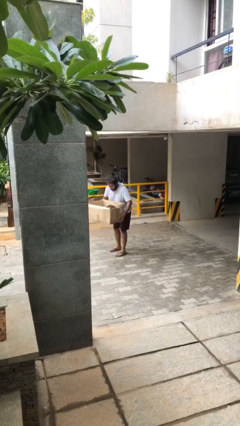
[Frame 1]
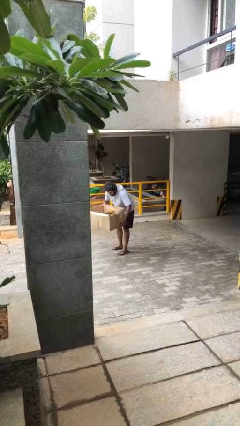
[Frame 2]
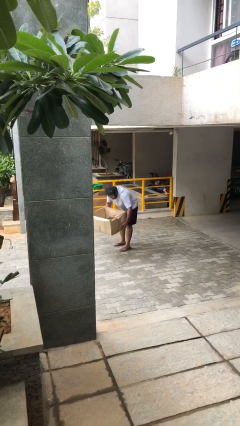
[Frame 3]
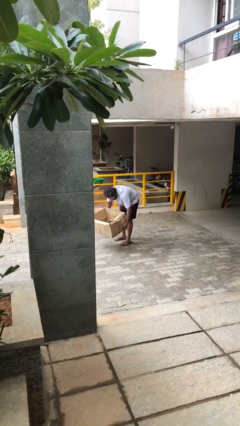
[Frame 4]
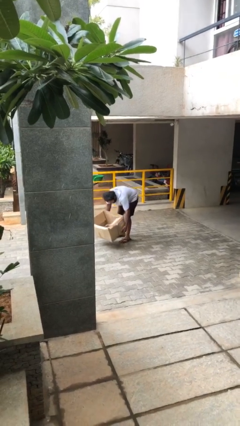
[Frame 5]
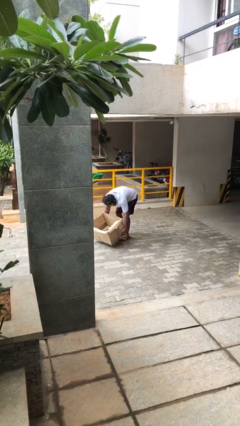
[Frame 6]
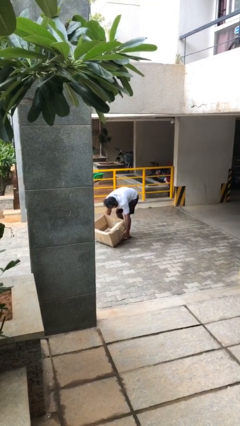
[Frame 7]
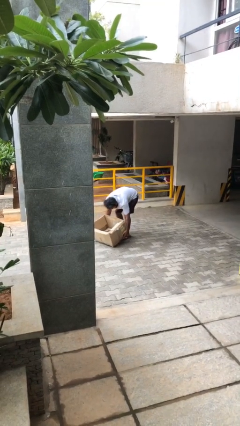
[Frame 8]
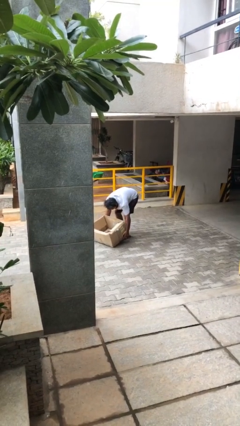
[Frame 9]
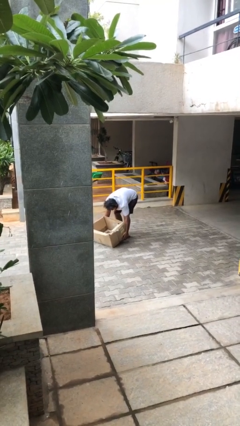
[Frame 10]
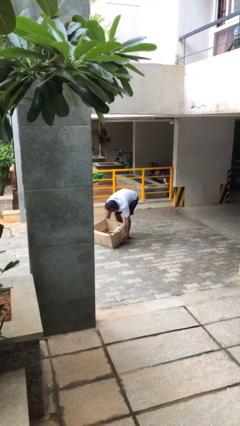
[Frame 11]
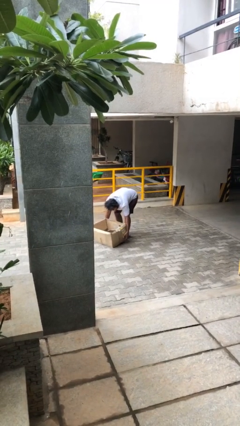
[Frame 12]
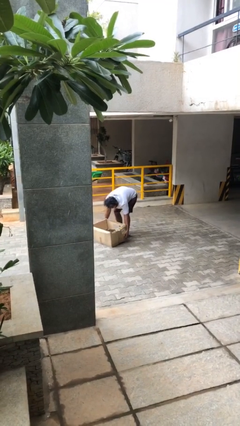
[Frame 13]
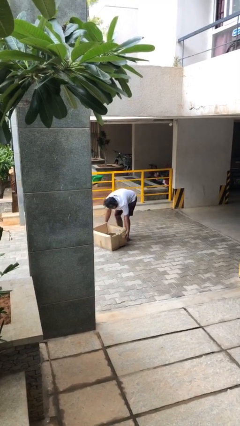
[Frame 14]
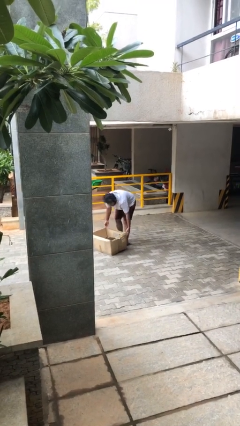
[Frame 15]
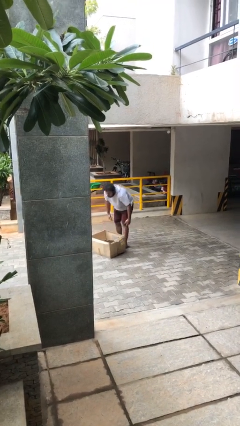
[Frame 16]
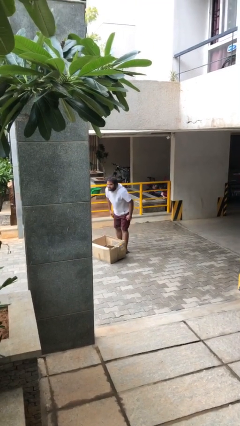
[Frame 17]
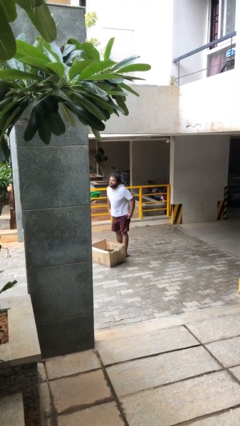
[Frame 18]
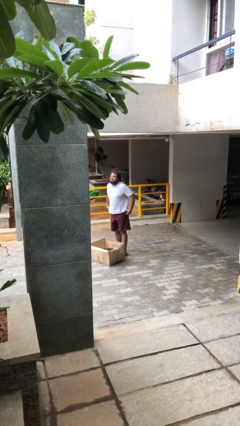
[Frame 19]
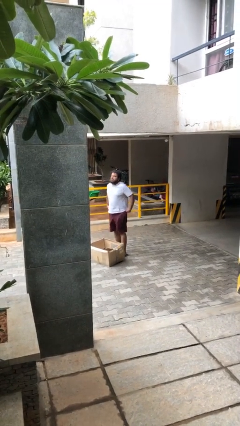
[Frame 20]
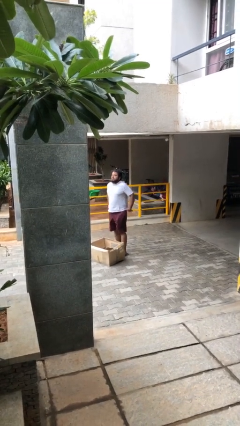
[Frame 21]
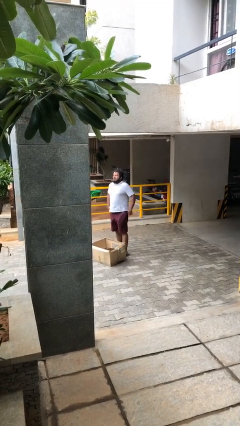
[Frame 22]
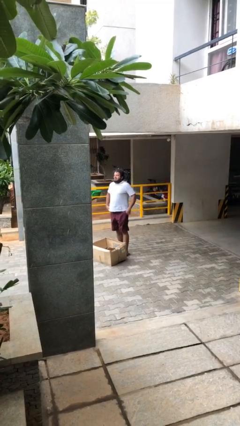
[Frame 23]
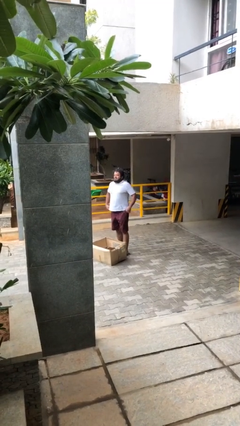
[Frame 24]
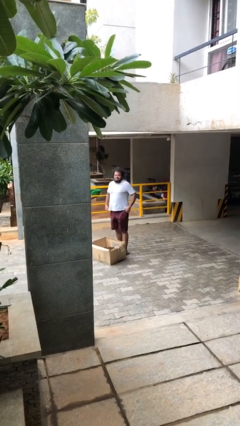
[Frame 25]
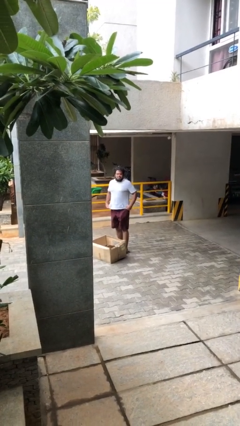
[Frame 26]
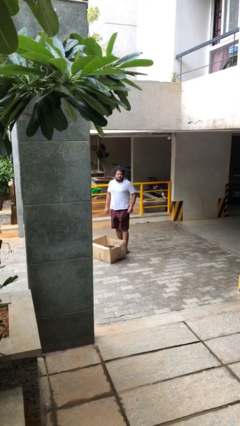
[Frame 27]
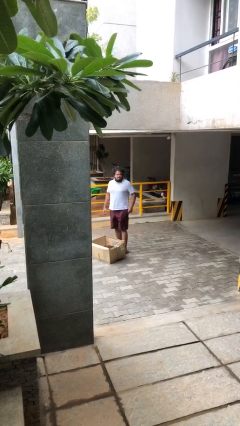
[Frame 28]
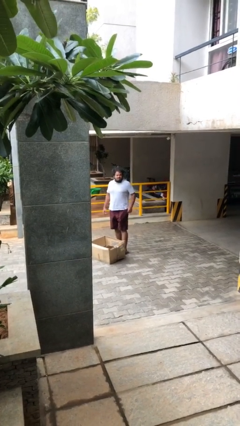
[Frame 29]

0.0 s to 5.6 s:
person puts down object on floor

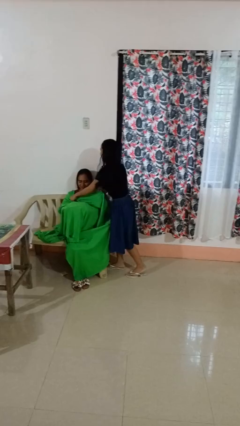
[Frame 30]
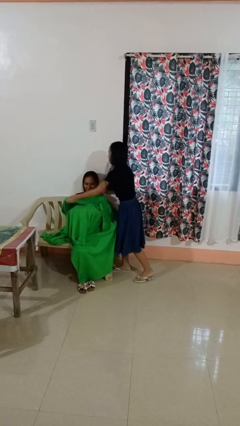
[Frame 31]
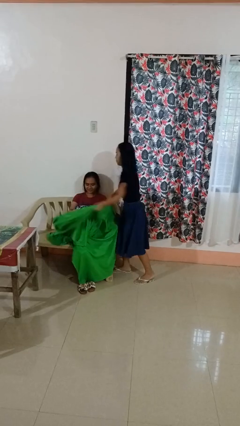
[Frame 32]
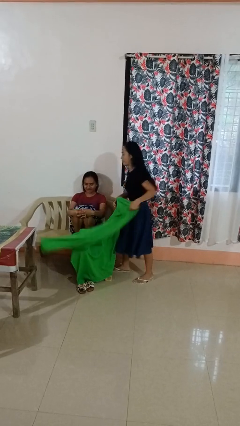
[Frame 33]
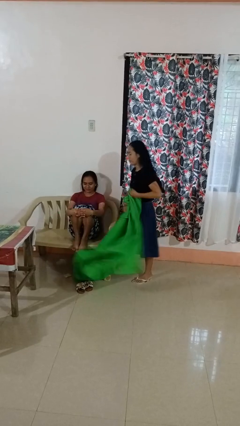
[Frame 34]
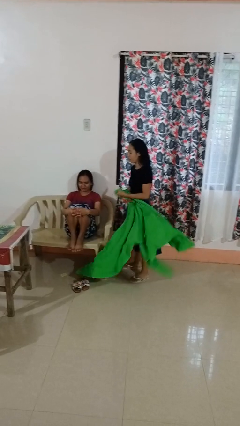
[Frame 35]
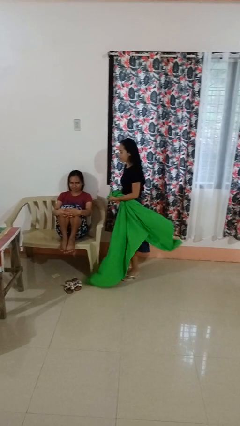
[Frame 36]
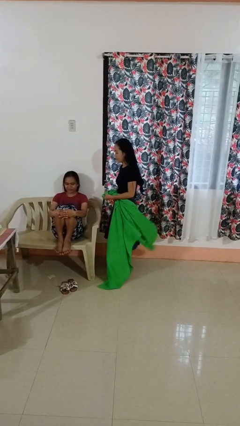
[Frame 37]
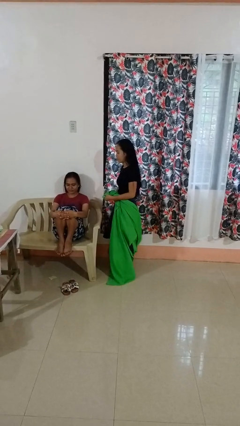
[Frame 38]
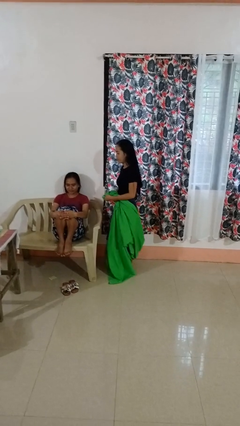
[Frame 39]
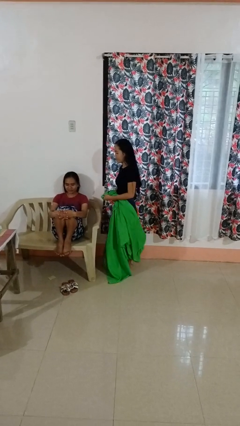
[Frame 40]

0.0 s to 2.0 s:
person uncovers friend with blanket

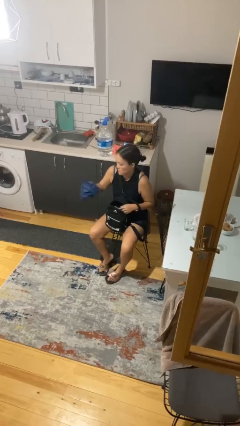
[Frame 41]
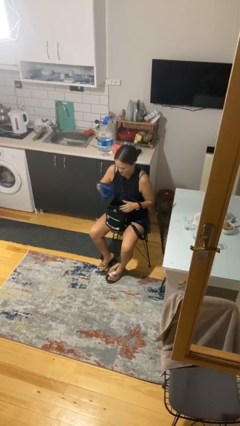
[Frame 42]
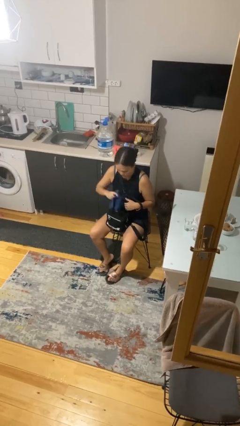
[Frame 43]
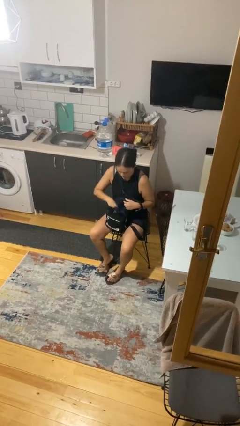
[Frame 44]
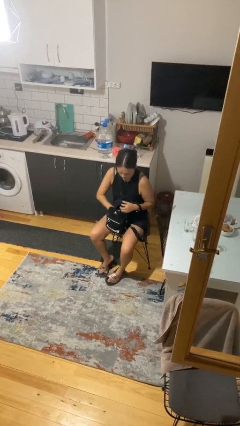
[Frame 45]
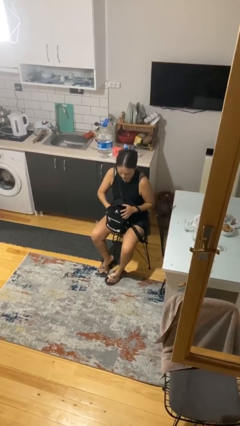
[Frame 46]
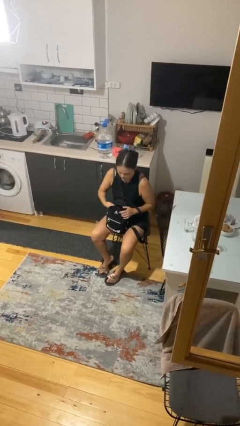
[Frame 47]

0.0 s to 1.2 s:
person puts object into backpack

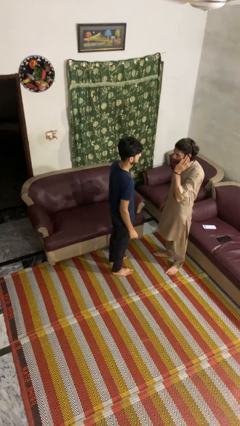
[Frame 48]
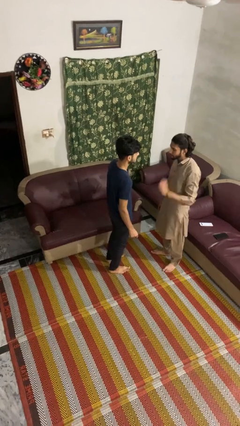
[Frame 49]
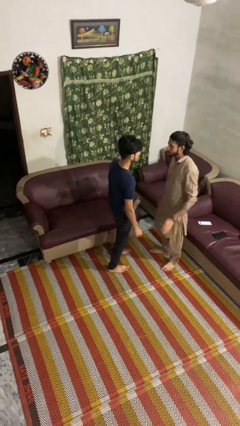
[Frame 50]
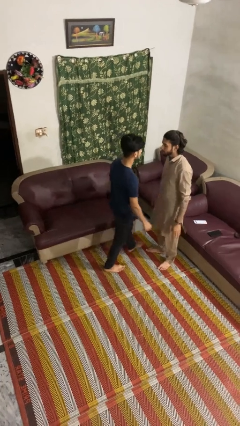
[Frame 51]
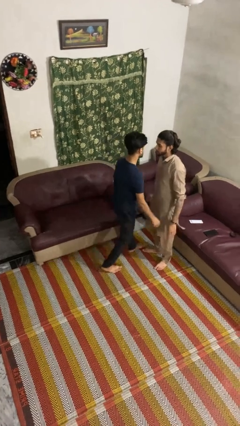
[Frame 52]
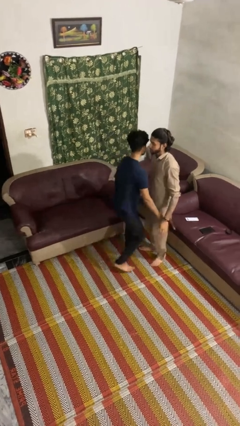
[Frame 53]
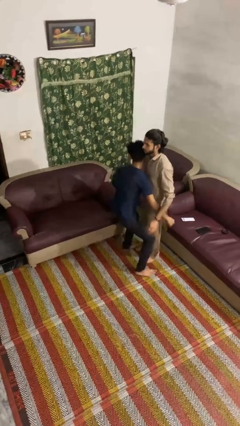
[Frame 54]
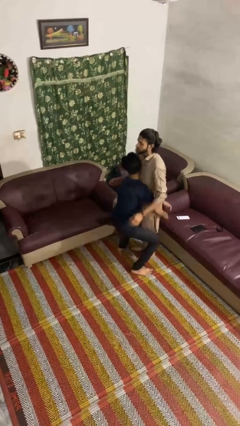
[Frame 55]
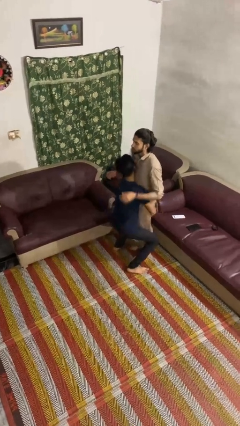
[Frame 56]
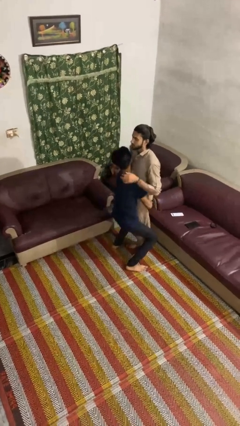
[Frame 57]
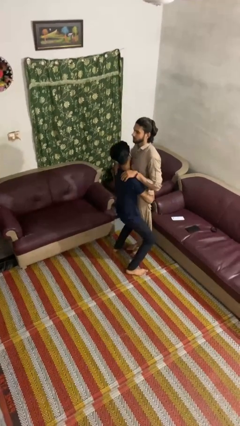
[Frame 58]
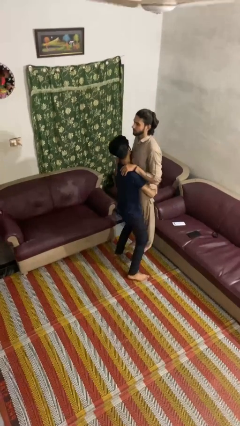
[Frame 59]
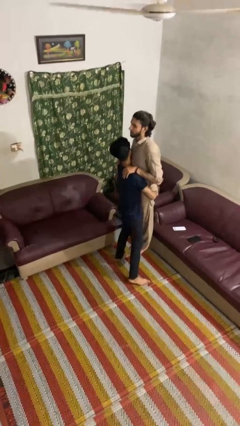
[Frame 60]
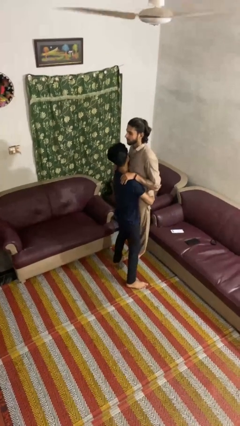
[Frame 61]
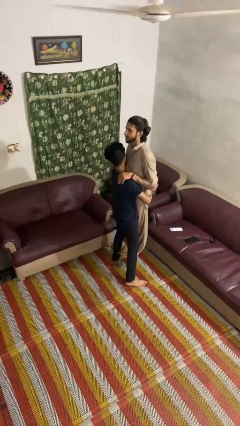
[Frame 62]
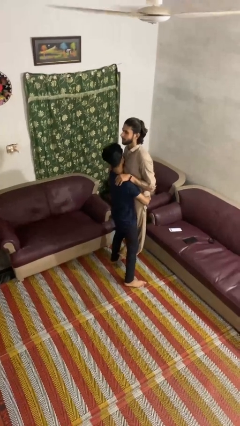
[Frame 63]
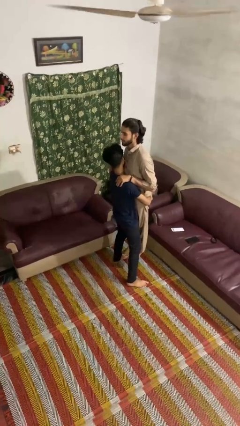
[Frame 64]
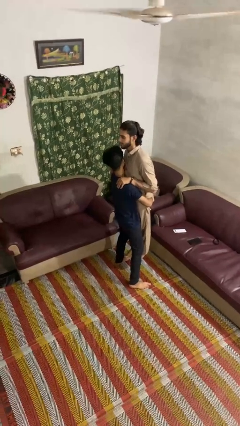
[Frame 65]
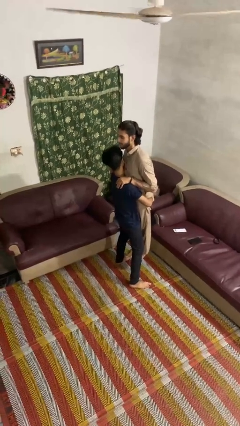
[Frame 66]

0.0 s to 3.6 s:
person picks up person

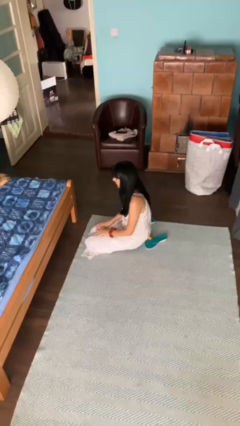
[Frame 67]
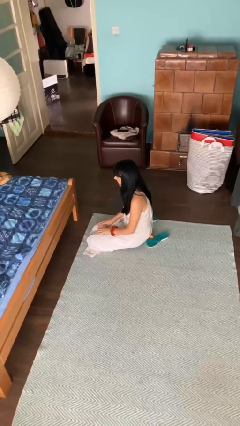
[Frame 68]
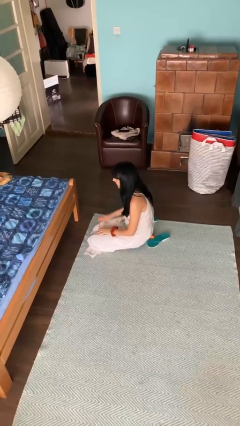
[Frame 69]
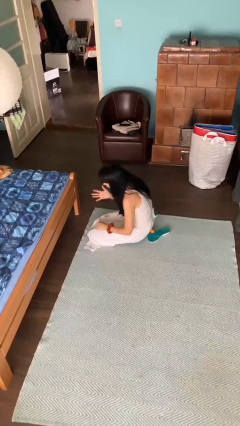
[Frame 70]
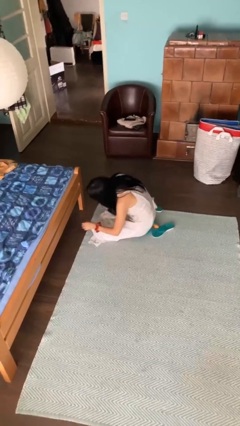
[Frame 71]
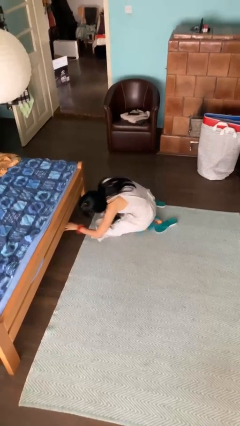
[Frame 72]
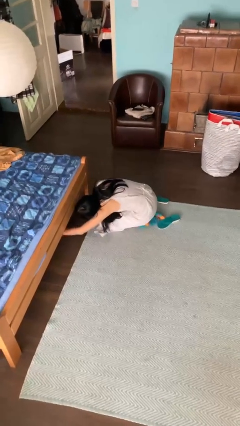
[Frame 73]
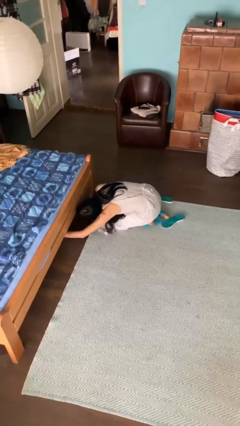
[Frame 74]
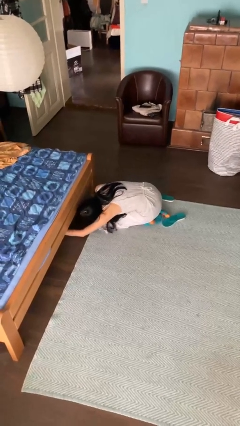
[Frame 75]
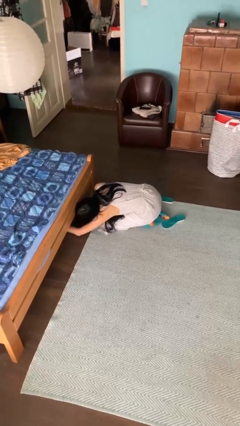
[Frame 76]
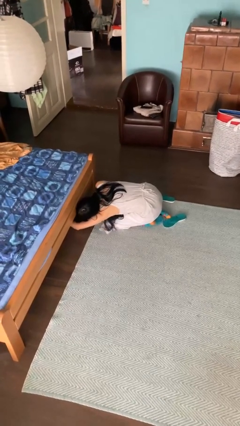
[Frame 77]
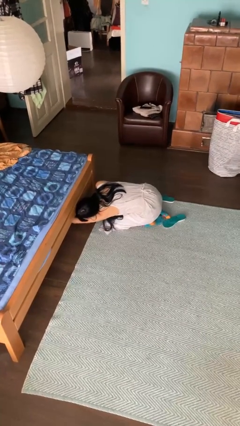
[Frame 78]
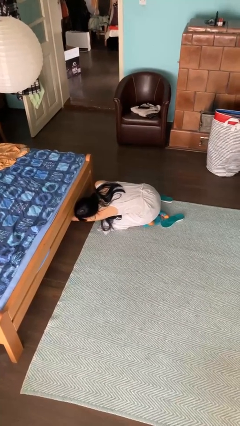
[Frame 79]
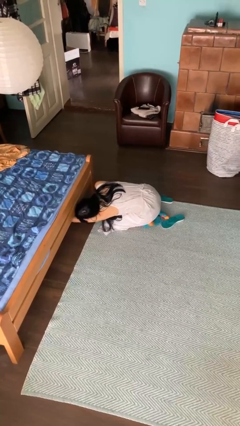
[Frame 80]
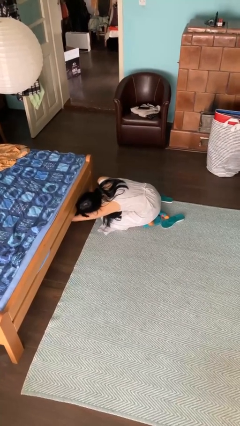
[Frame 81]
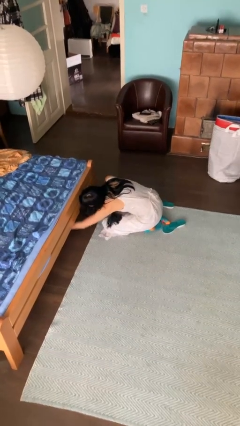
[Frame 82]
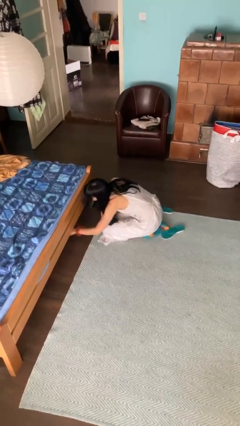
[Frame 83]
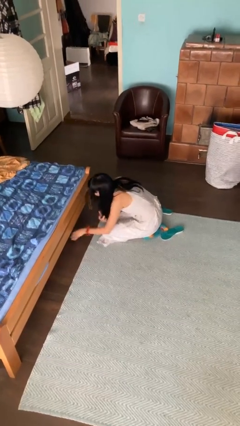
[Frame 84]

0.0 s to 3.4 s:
person searches under bed

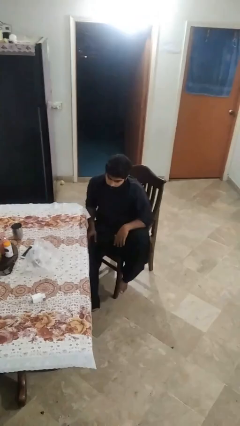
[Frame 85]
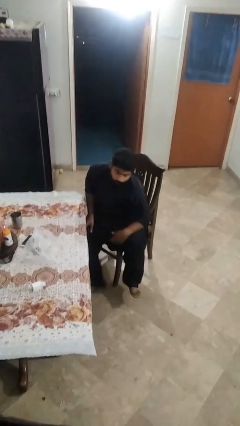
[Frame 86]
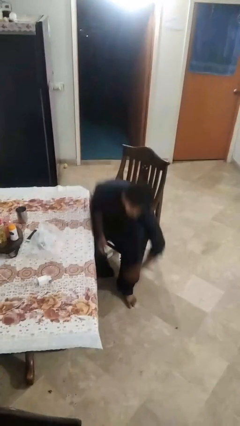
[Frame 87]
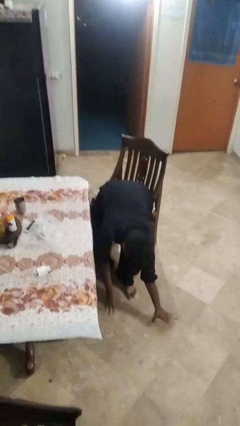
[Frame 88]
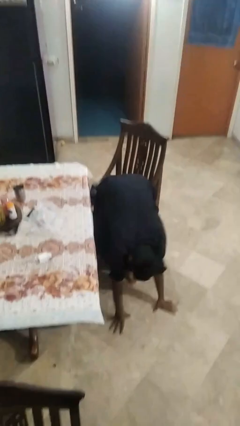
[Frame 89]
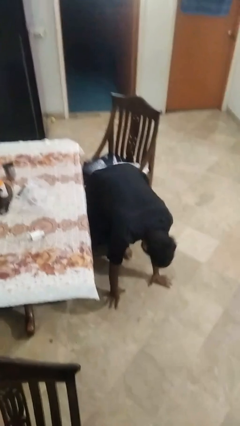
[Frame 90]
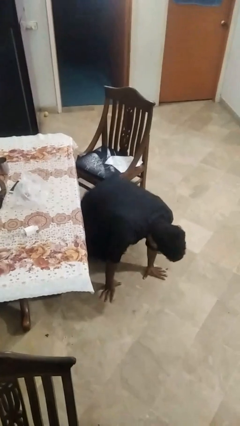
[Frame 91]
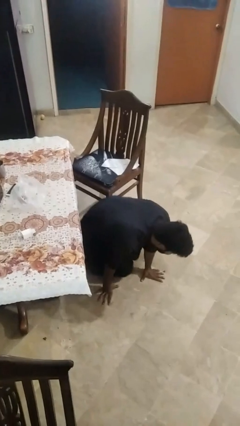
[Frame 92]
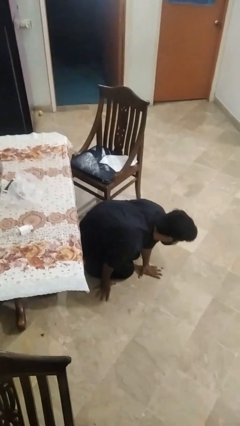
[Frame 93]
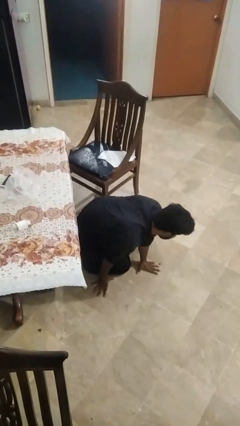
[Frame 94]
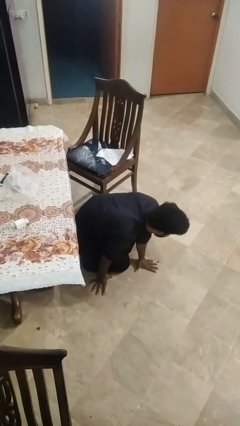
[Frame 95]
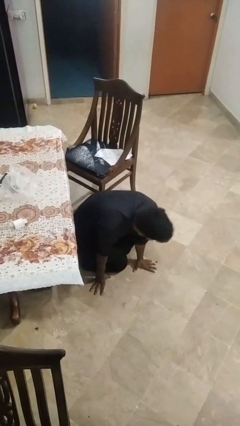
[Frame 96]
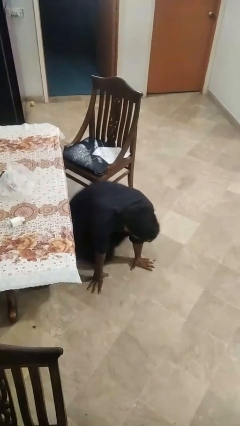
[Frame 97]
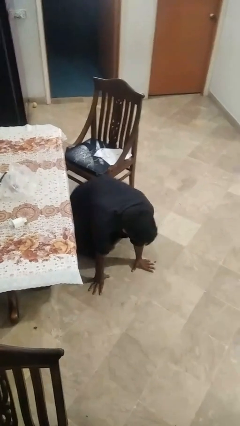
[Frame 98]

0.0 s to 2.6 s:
person falls from chair
